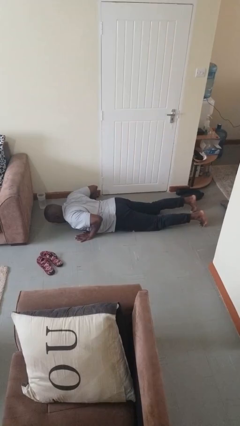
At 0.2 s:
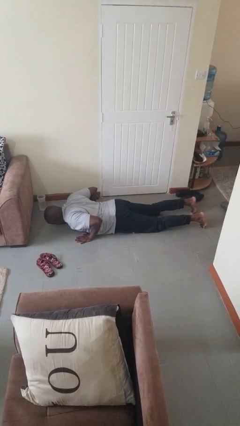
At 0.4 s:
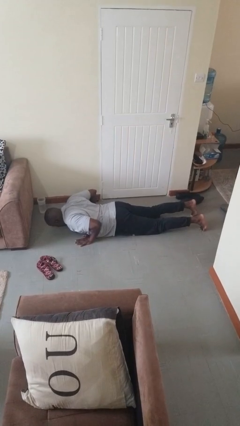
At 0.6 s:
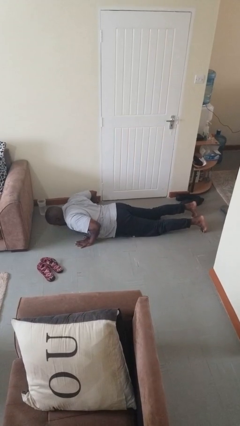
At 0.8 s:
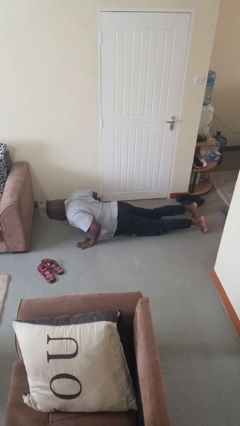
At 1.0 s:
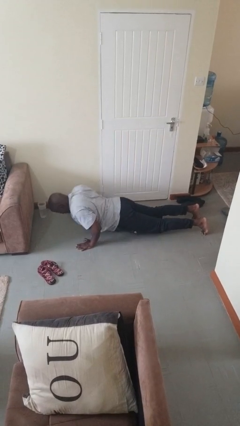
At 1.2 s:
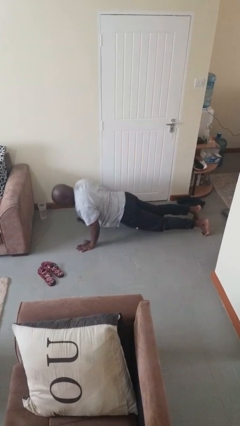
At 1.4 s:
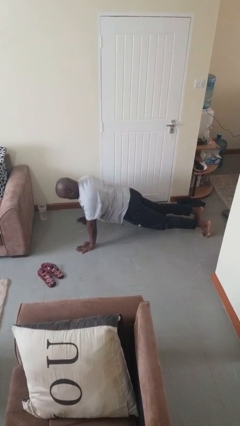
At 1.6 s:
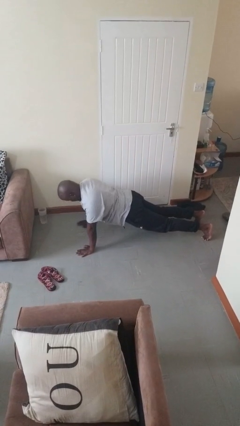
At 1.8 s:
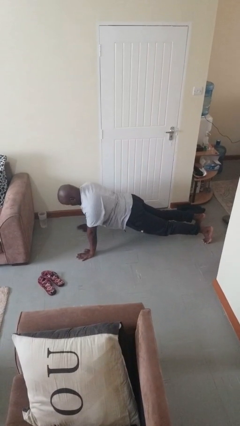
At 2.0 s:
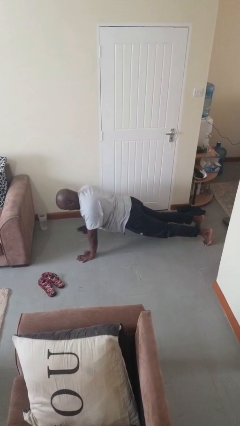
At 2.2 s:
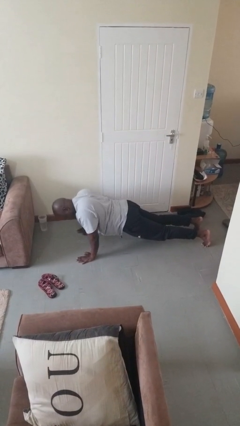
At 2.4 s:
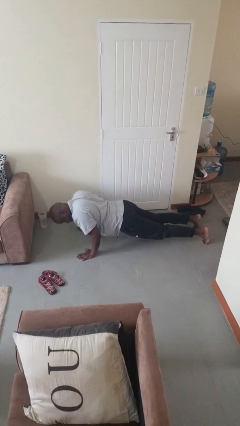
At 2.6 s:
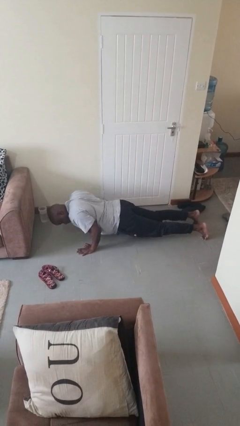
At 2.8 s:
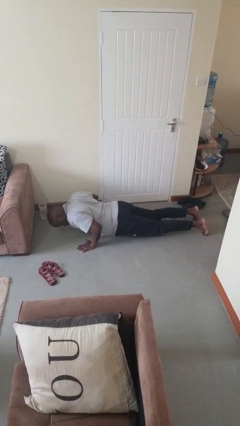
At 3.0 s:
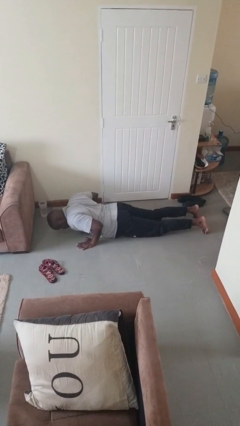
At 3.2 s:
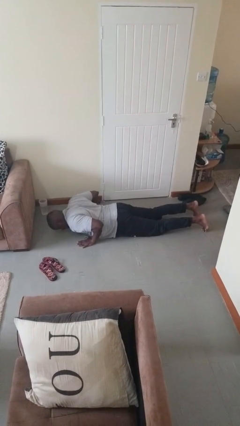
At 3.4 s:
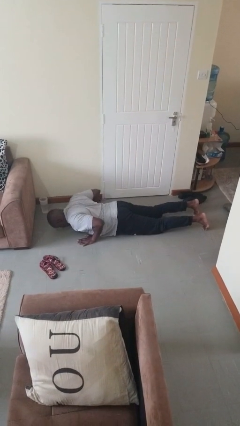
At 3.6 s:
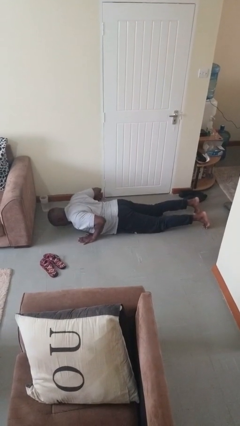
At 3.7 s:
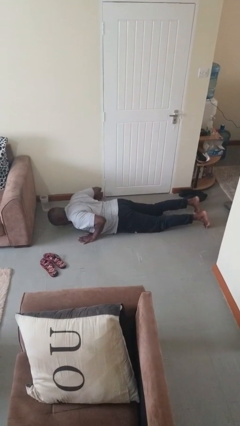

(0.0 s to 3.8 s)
person exercises with pushup

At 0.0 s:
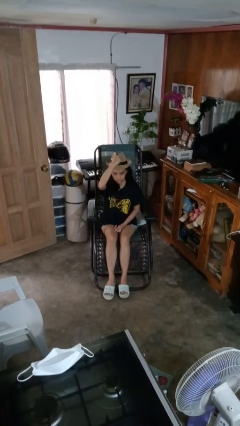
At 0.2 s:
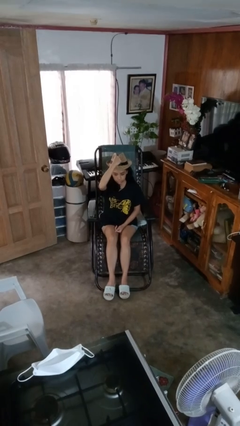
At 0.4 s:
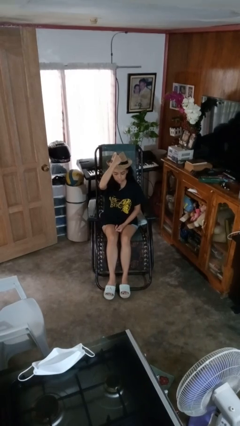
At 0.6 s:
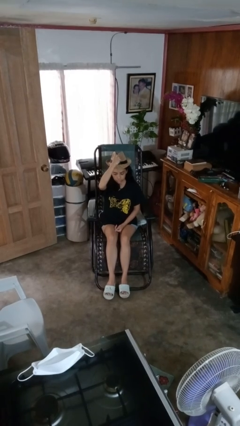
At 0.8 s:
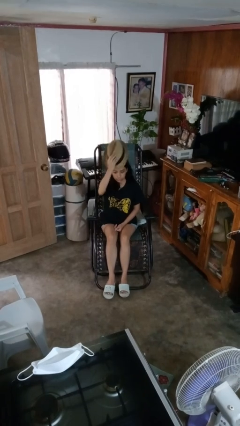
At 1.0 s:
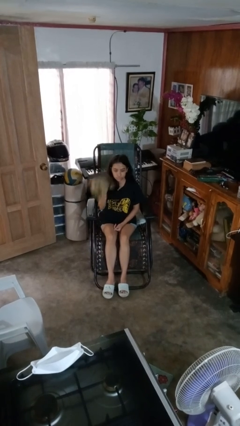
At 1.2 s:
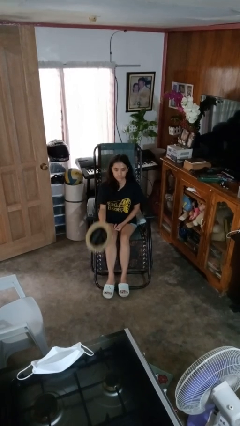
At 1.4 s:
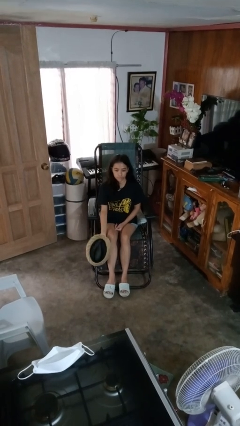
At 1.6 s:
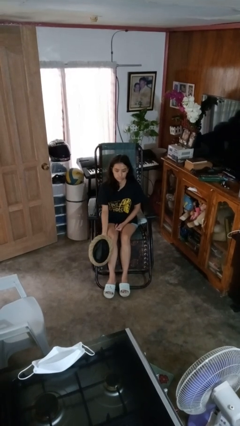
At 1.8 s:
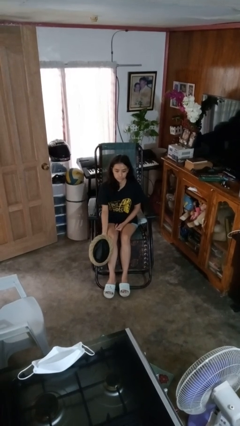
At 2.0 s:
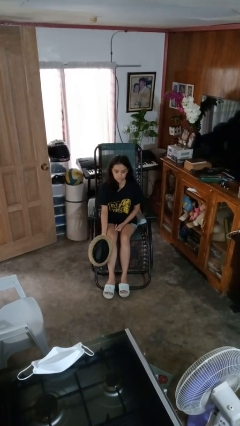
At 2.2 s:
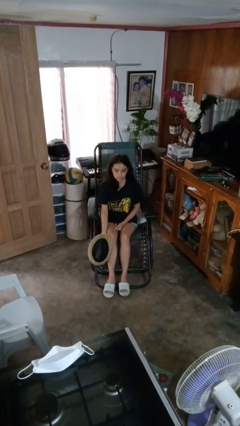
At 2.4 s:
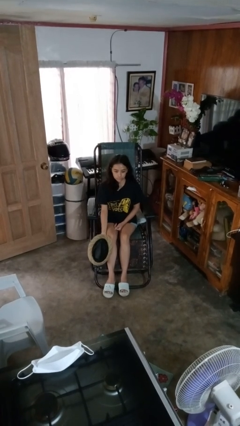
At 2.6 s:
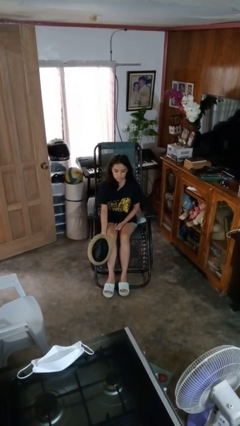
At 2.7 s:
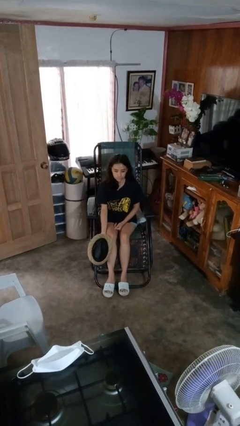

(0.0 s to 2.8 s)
person takes off hat

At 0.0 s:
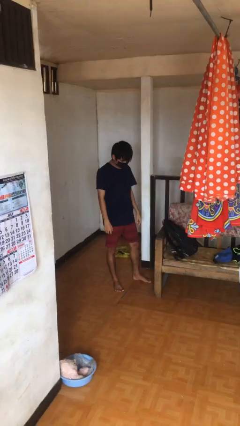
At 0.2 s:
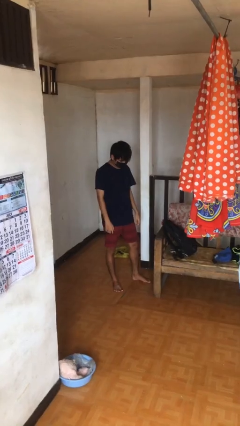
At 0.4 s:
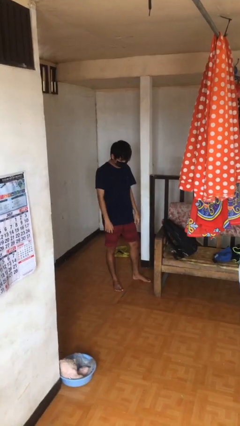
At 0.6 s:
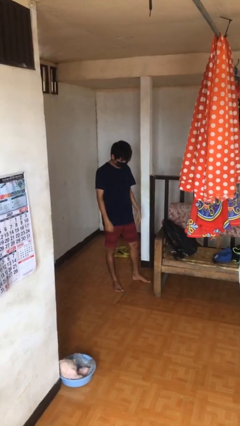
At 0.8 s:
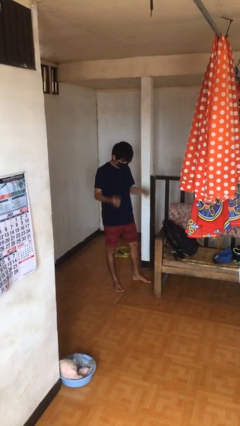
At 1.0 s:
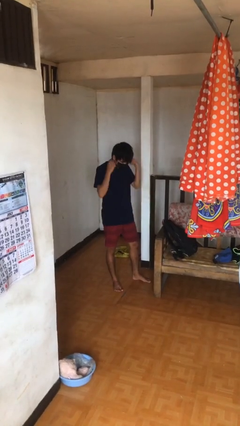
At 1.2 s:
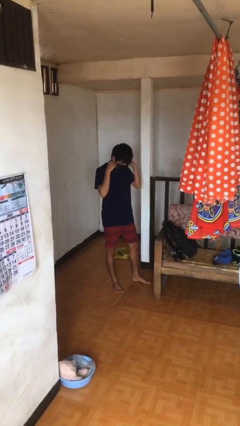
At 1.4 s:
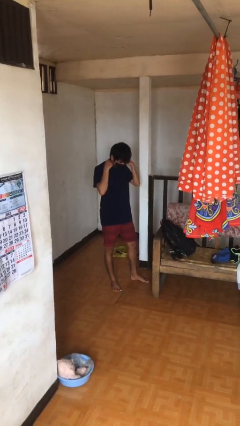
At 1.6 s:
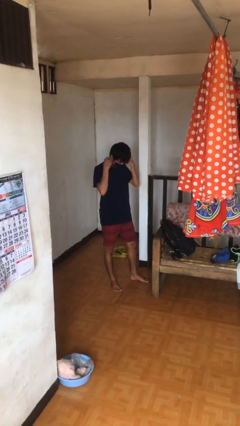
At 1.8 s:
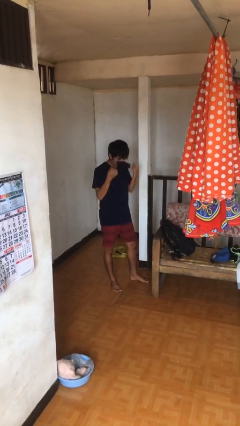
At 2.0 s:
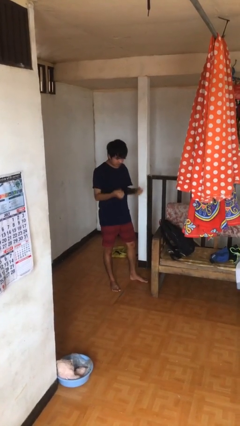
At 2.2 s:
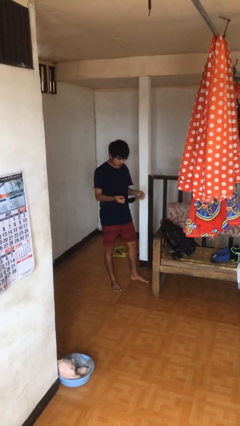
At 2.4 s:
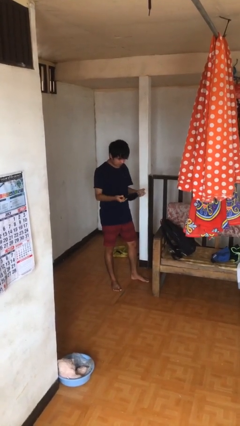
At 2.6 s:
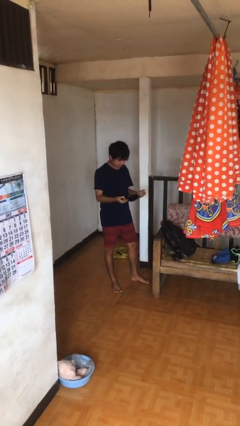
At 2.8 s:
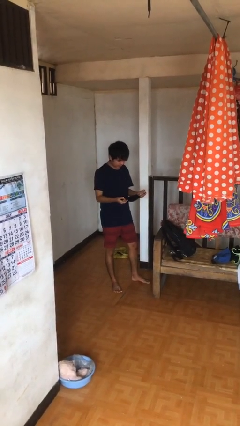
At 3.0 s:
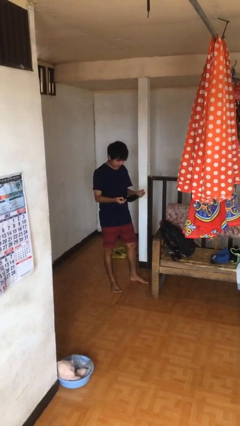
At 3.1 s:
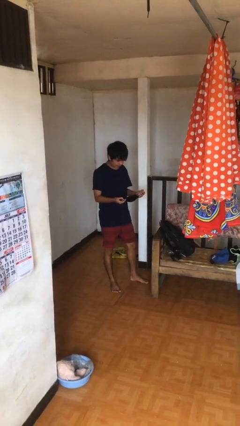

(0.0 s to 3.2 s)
person takes off facemask

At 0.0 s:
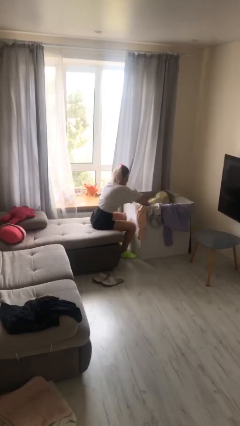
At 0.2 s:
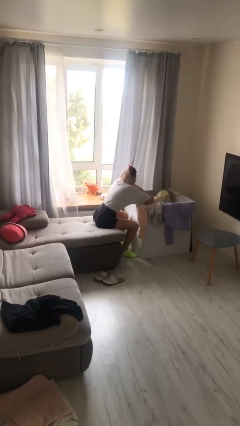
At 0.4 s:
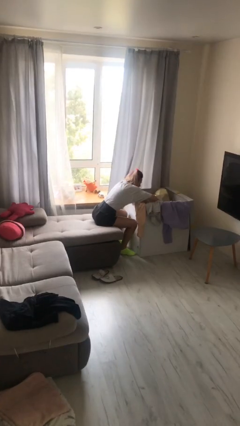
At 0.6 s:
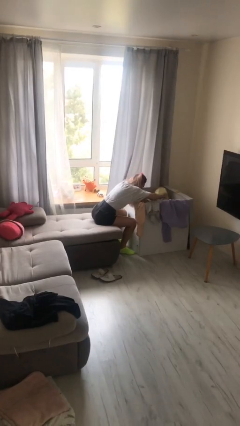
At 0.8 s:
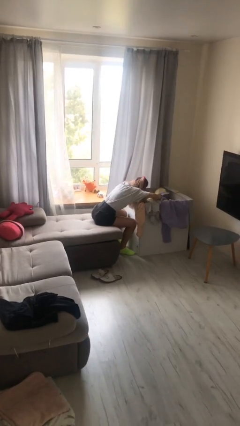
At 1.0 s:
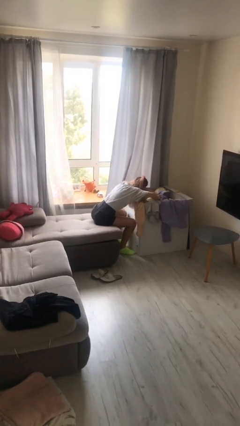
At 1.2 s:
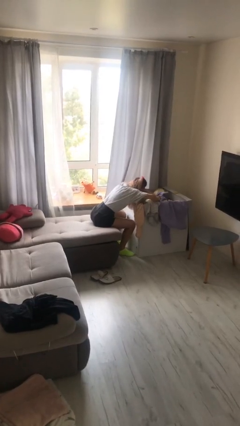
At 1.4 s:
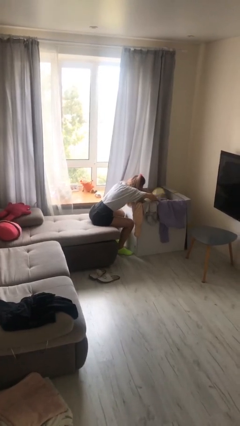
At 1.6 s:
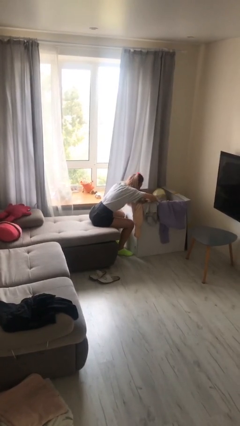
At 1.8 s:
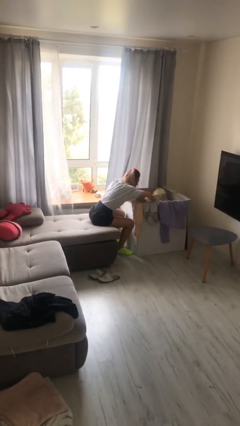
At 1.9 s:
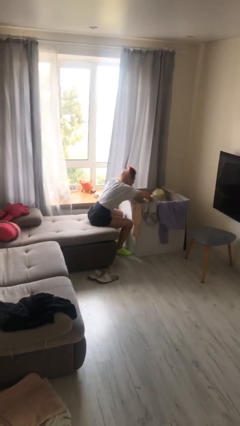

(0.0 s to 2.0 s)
person searches in box

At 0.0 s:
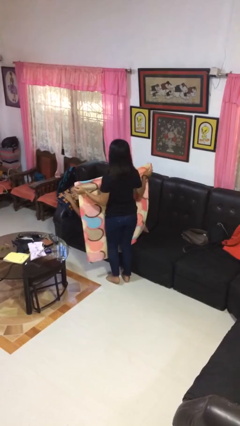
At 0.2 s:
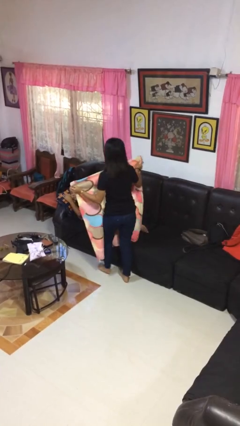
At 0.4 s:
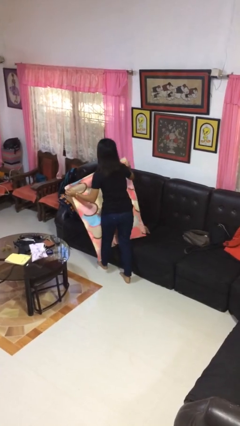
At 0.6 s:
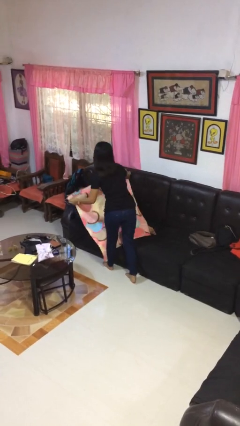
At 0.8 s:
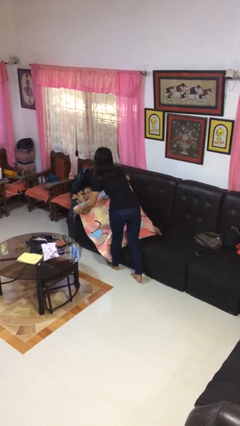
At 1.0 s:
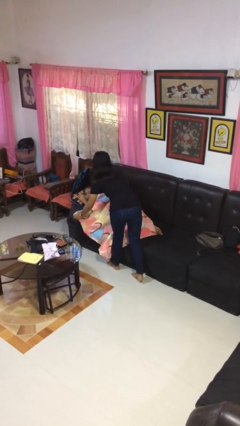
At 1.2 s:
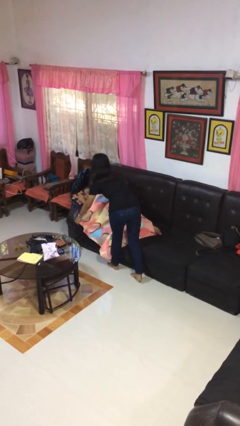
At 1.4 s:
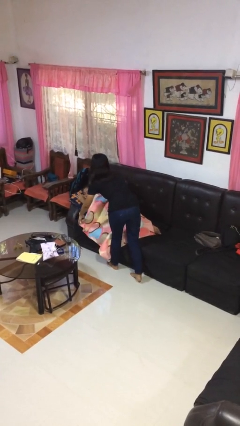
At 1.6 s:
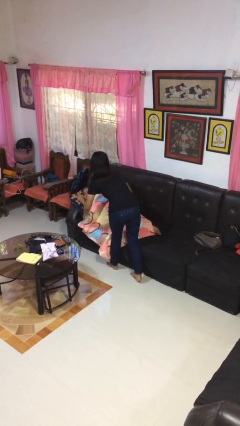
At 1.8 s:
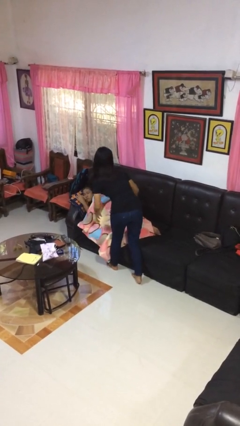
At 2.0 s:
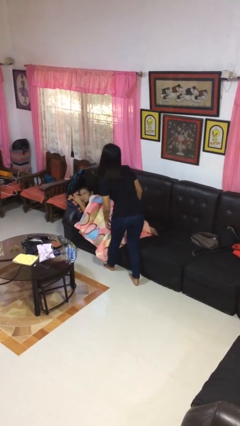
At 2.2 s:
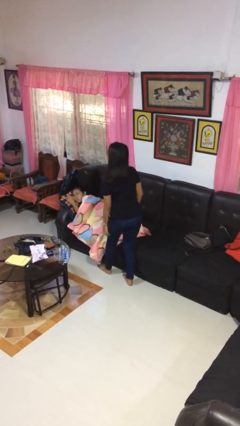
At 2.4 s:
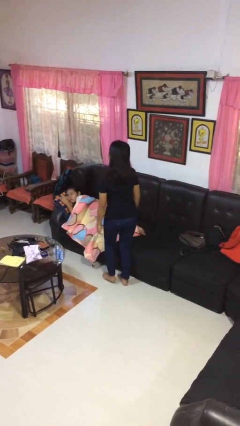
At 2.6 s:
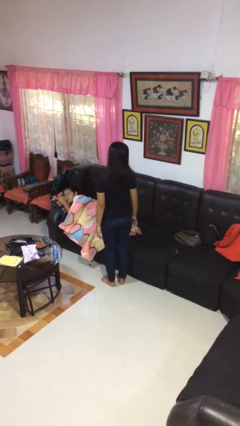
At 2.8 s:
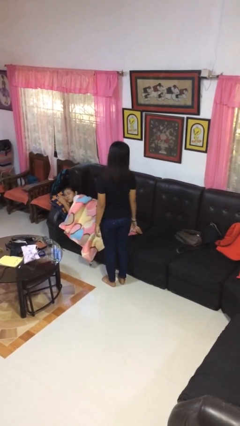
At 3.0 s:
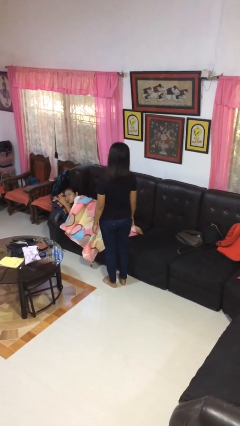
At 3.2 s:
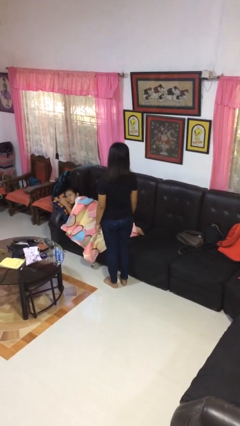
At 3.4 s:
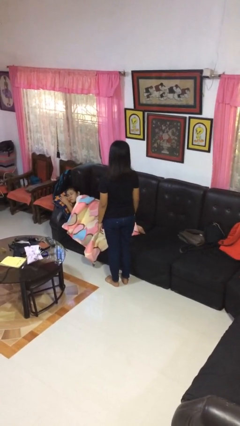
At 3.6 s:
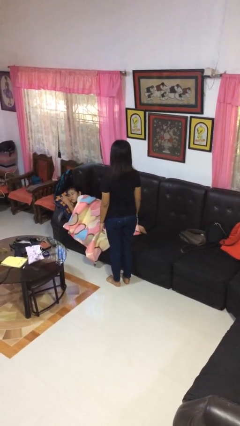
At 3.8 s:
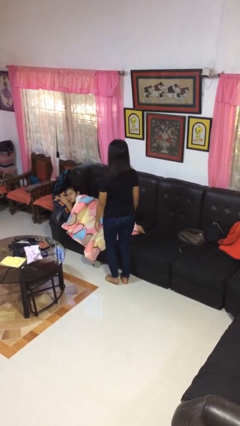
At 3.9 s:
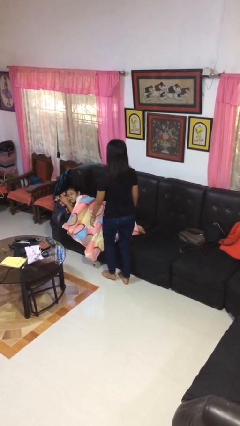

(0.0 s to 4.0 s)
person covers friend with blanket

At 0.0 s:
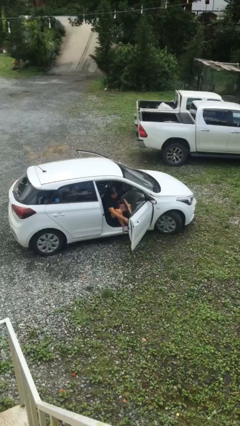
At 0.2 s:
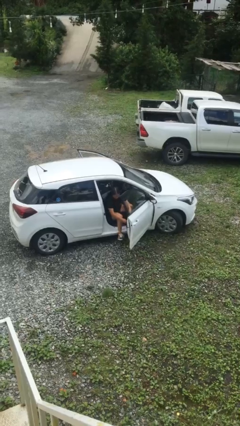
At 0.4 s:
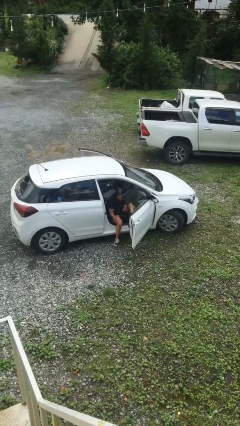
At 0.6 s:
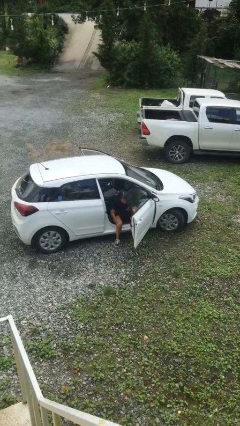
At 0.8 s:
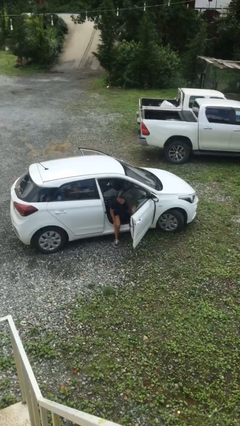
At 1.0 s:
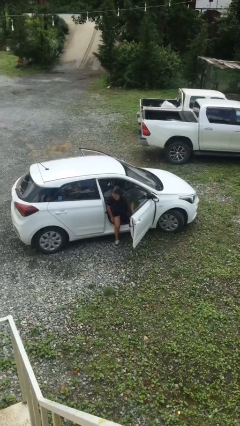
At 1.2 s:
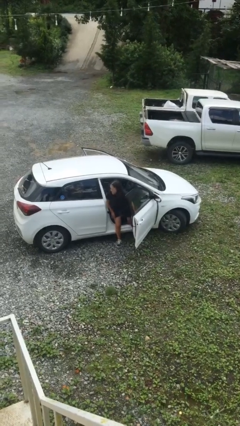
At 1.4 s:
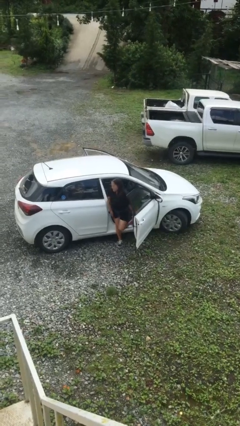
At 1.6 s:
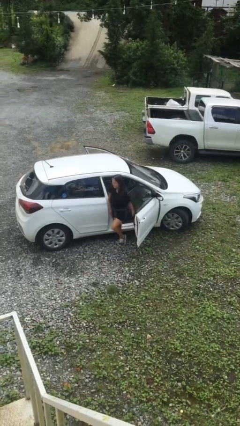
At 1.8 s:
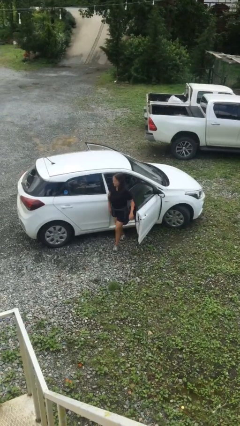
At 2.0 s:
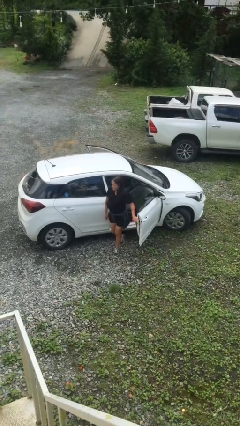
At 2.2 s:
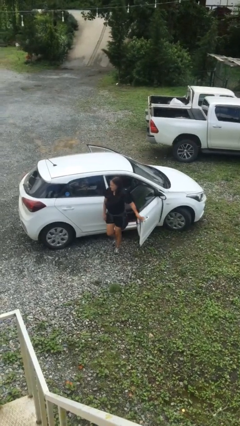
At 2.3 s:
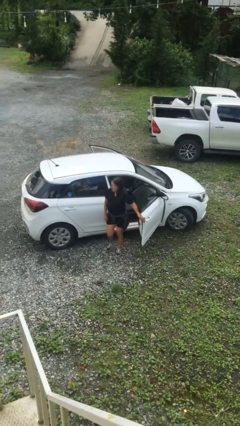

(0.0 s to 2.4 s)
person exits car
